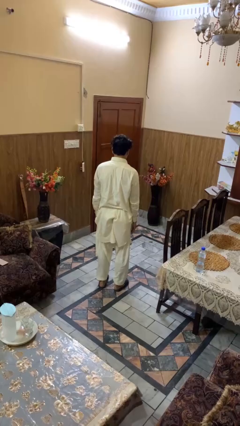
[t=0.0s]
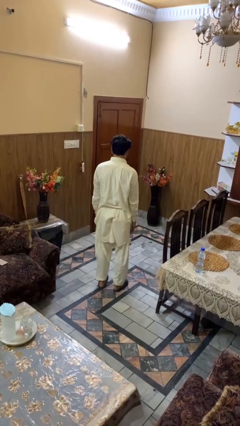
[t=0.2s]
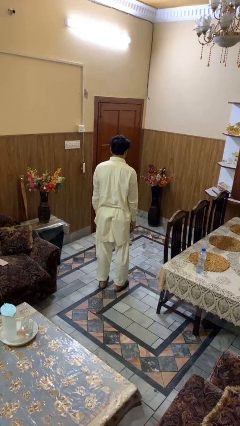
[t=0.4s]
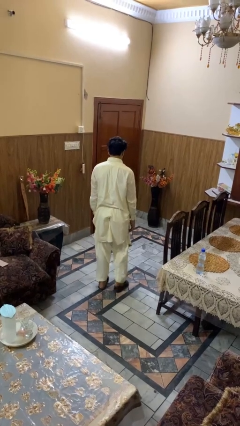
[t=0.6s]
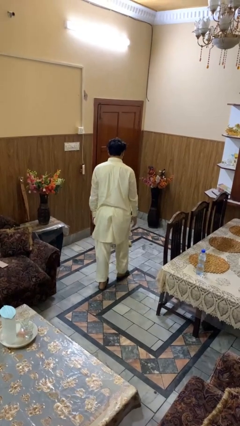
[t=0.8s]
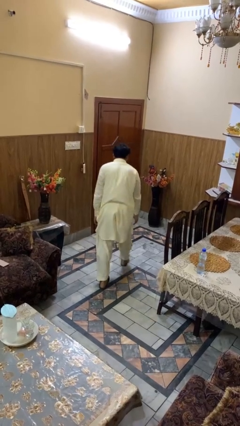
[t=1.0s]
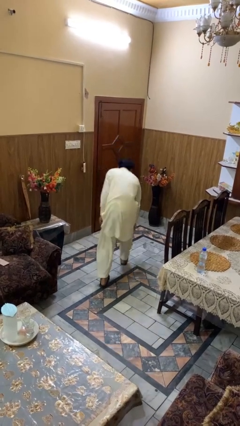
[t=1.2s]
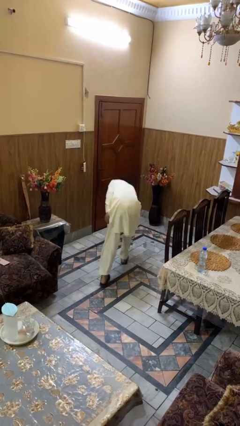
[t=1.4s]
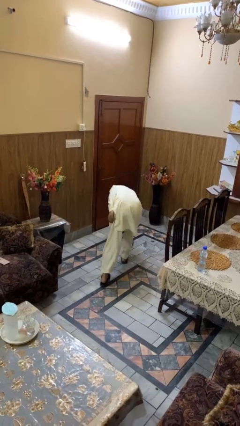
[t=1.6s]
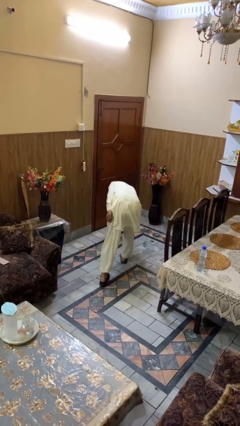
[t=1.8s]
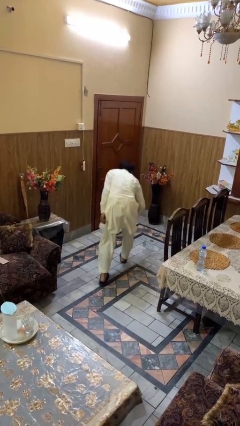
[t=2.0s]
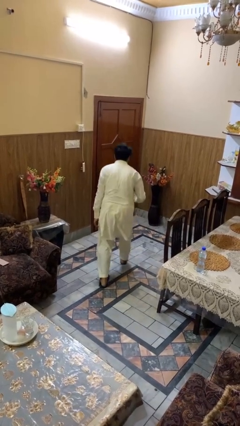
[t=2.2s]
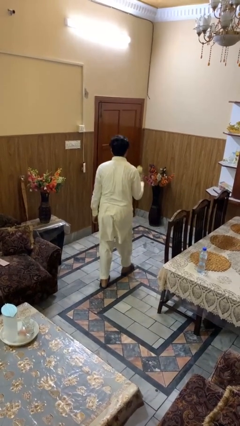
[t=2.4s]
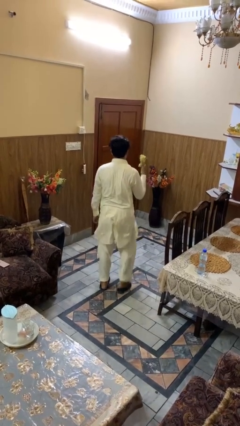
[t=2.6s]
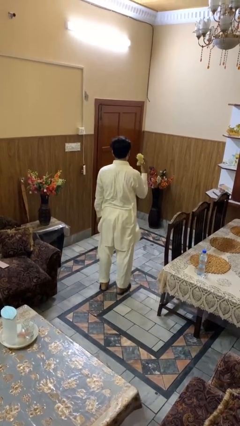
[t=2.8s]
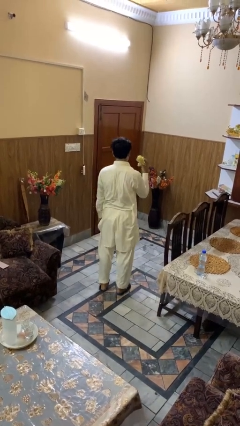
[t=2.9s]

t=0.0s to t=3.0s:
person picks up object from floor

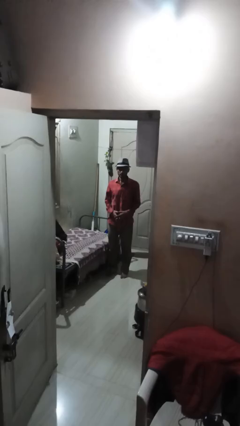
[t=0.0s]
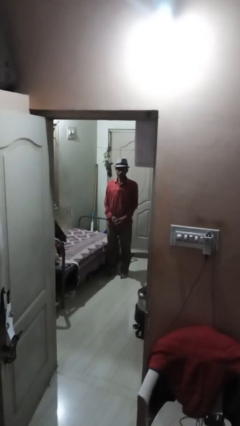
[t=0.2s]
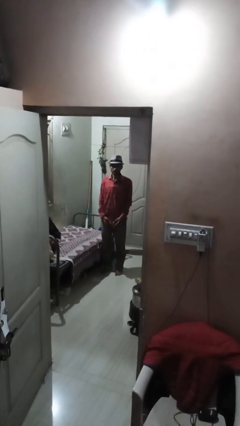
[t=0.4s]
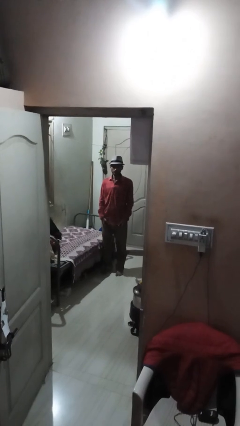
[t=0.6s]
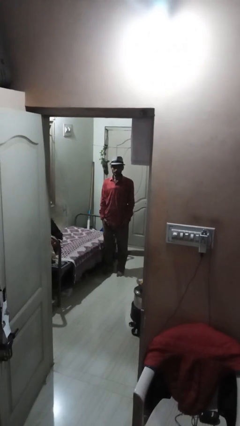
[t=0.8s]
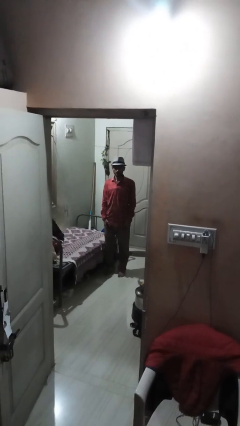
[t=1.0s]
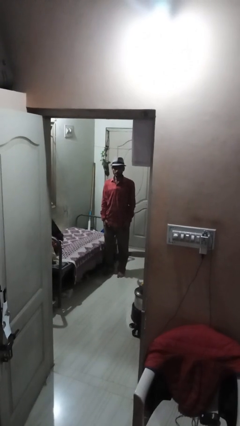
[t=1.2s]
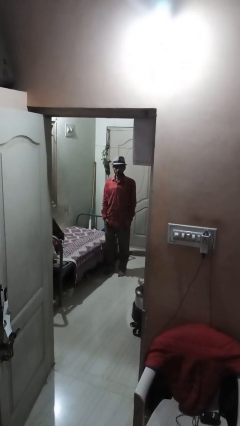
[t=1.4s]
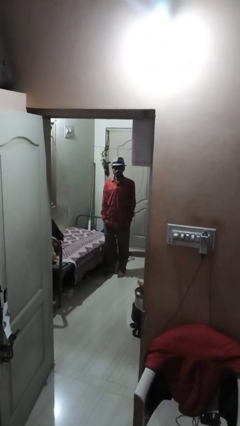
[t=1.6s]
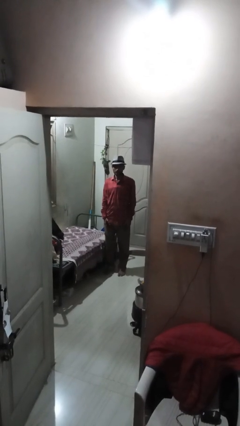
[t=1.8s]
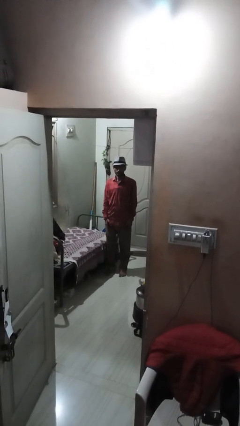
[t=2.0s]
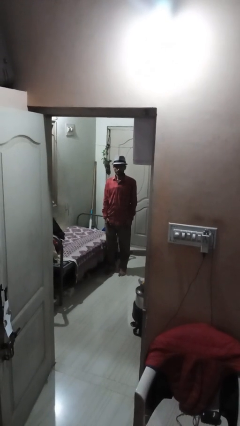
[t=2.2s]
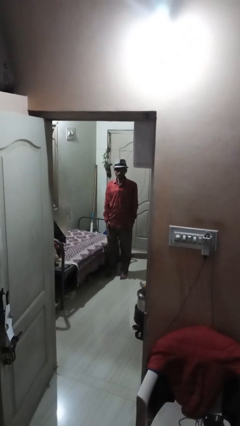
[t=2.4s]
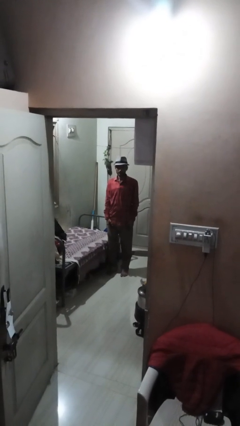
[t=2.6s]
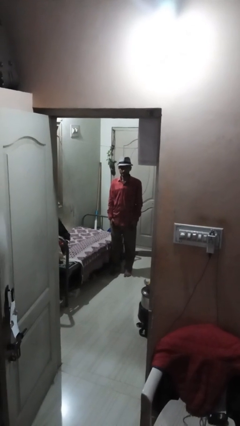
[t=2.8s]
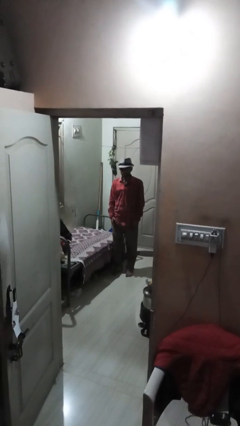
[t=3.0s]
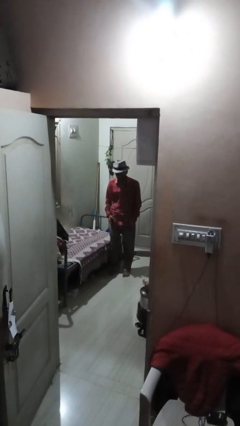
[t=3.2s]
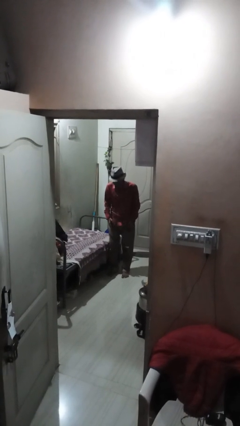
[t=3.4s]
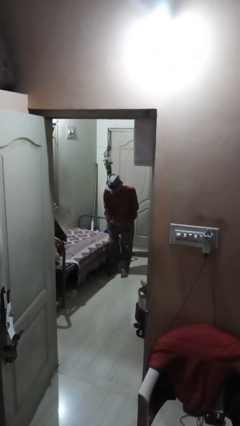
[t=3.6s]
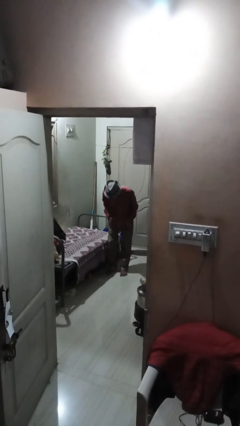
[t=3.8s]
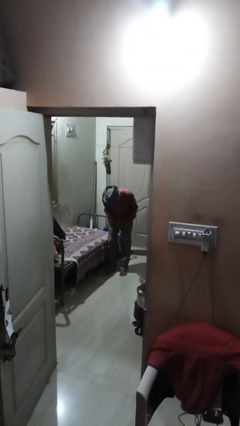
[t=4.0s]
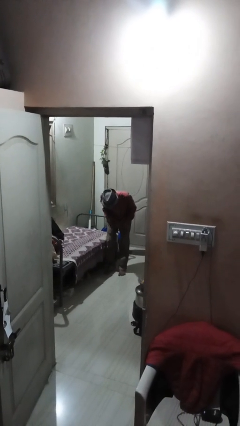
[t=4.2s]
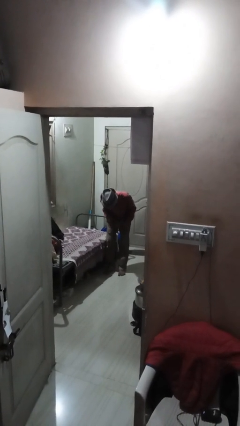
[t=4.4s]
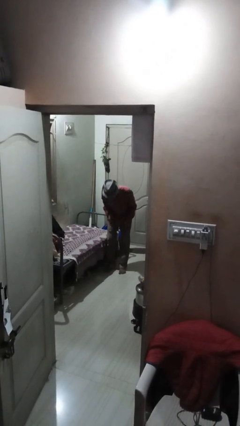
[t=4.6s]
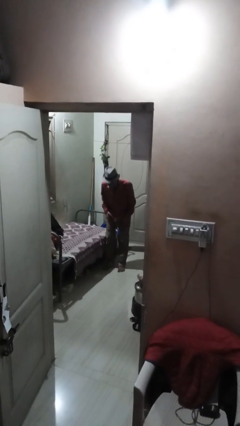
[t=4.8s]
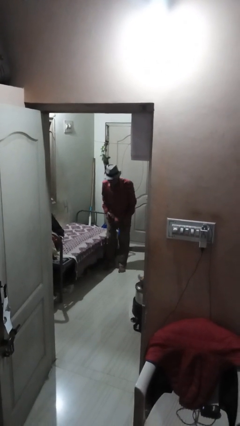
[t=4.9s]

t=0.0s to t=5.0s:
person bows

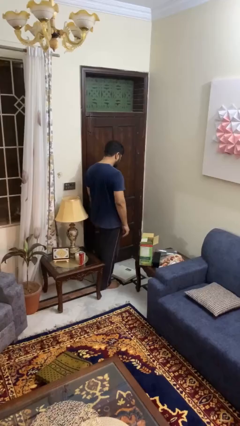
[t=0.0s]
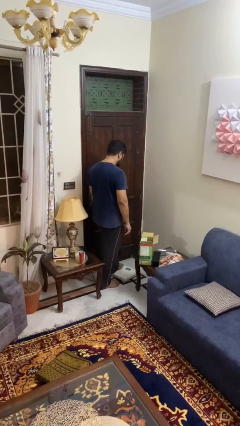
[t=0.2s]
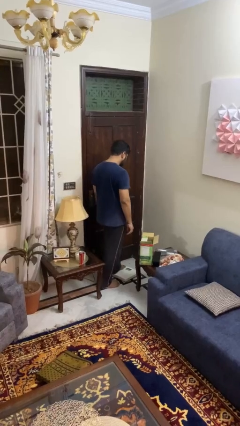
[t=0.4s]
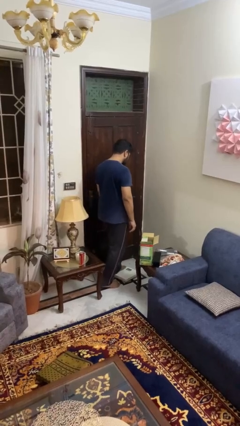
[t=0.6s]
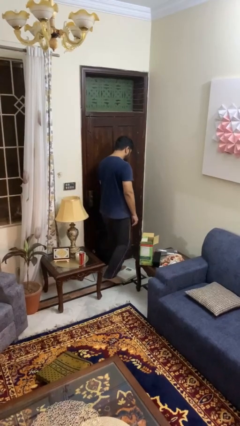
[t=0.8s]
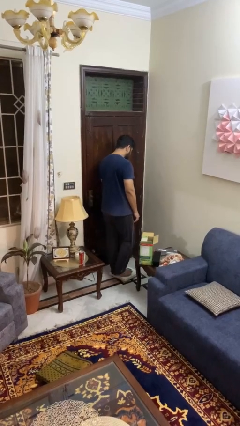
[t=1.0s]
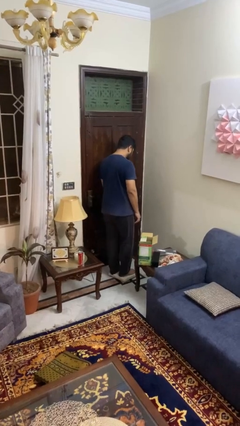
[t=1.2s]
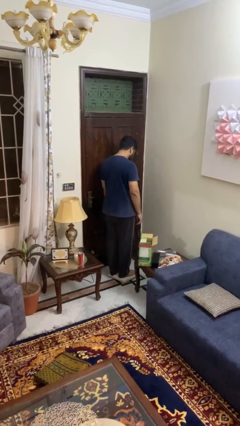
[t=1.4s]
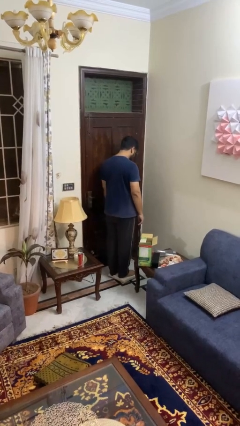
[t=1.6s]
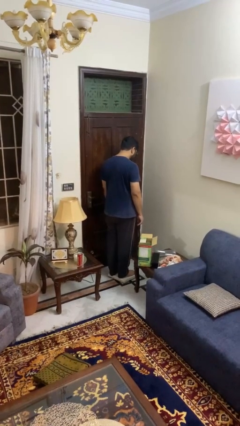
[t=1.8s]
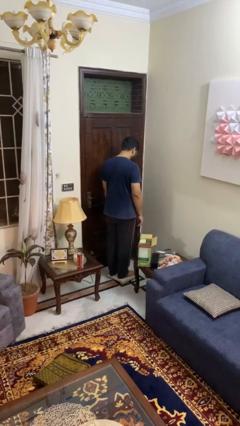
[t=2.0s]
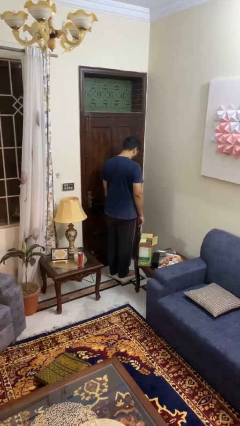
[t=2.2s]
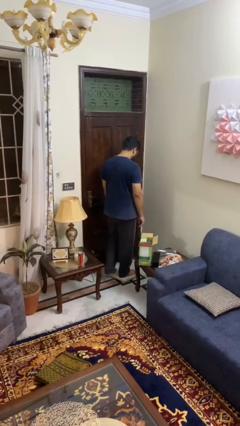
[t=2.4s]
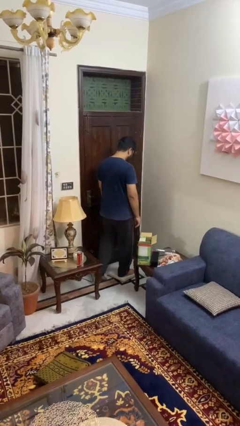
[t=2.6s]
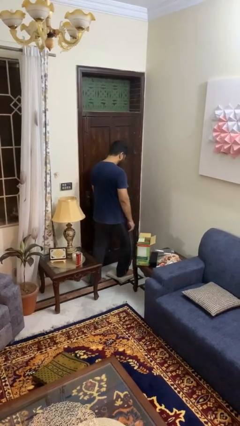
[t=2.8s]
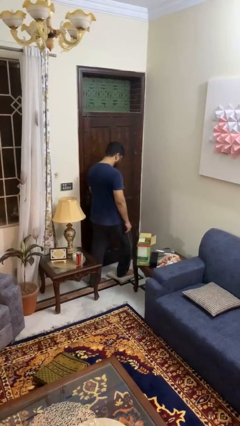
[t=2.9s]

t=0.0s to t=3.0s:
person uses bodyweight scale

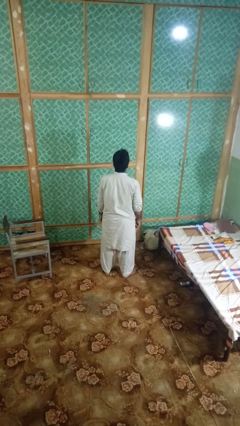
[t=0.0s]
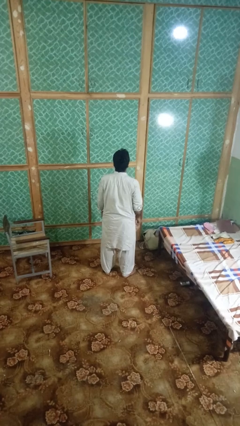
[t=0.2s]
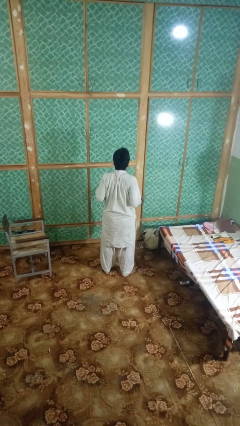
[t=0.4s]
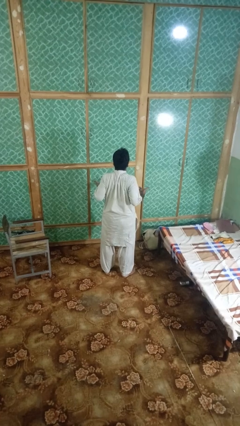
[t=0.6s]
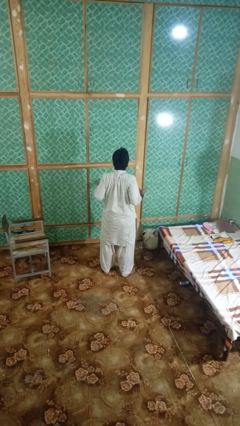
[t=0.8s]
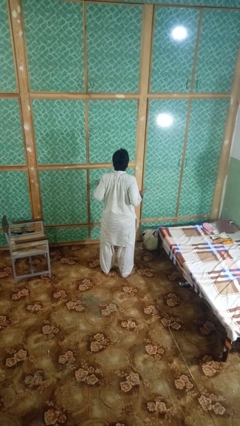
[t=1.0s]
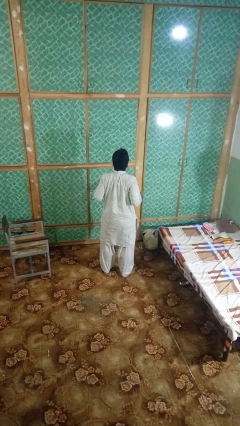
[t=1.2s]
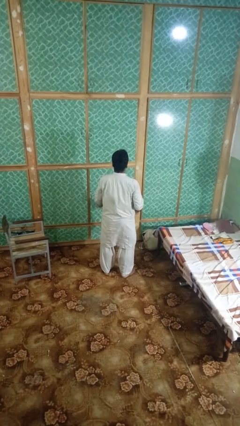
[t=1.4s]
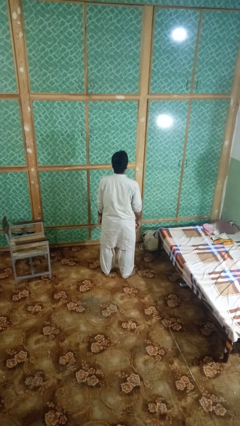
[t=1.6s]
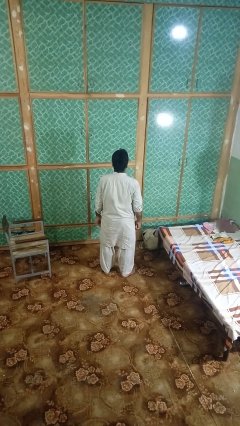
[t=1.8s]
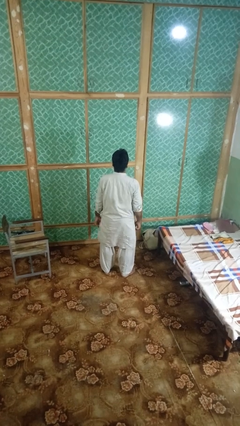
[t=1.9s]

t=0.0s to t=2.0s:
person shrugs

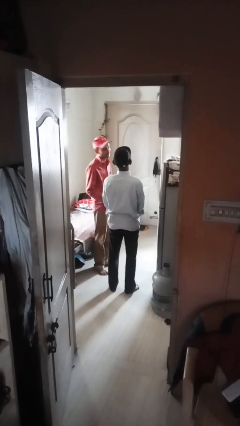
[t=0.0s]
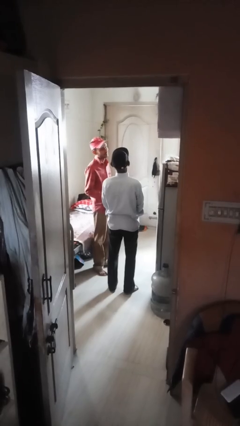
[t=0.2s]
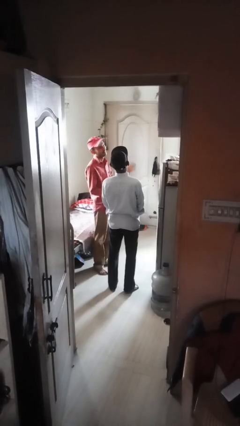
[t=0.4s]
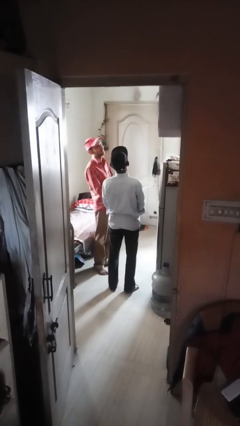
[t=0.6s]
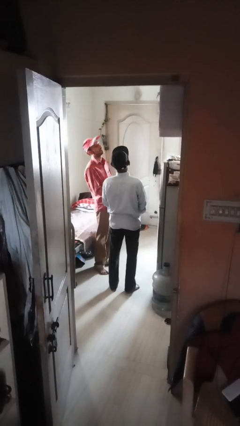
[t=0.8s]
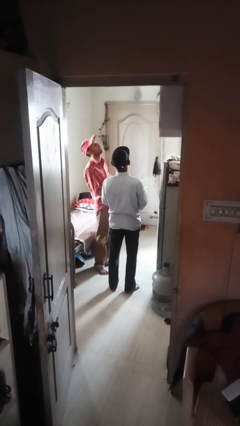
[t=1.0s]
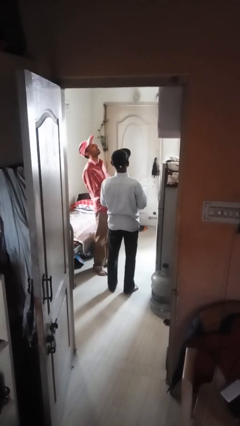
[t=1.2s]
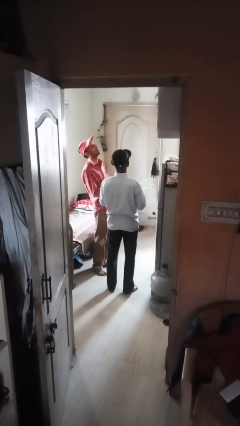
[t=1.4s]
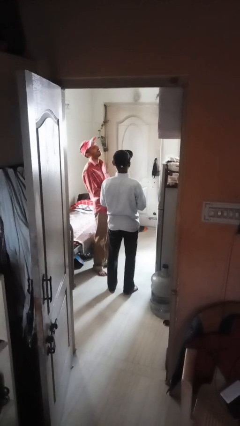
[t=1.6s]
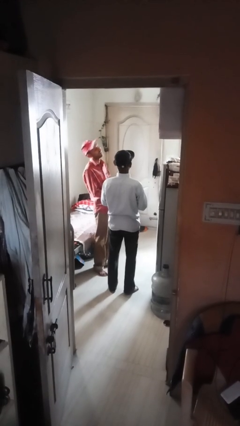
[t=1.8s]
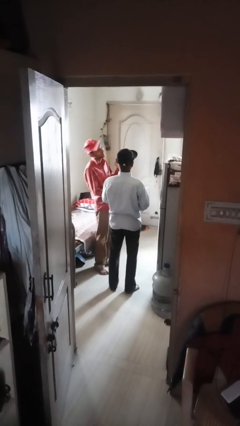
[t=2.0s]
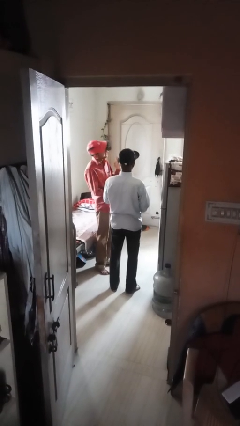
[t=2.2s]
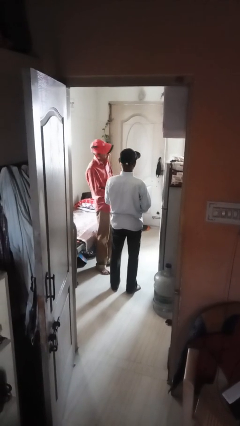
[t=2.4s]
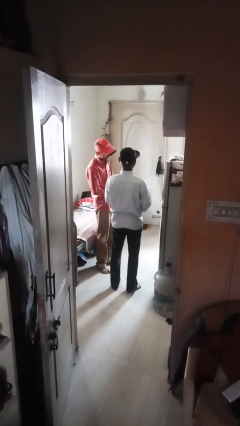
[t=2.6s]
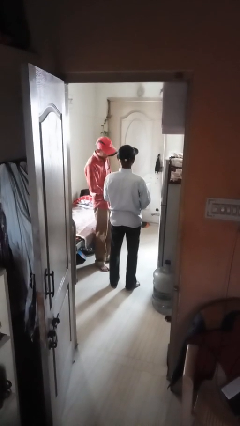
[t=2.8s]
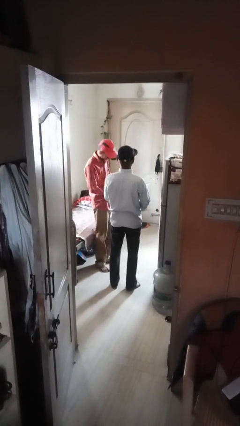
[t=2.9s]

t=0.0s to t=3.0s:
person laughs with person

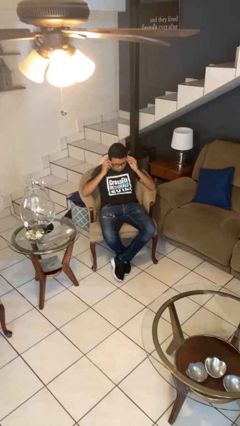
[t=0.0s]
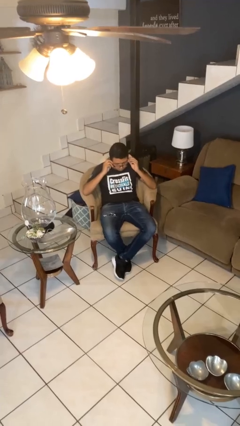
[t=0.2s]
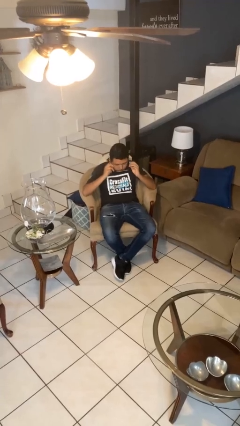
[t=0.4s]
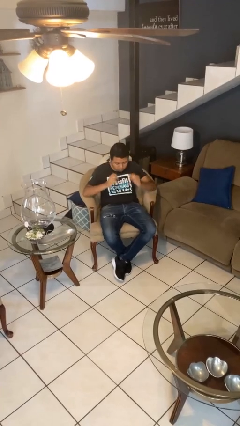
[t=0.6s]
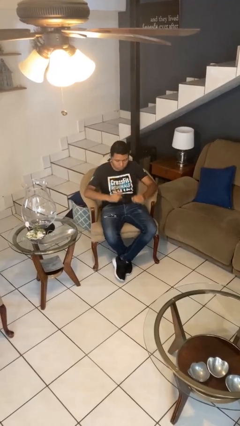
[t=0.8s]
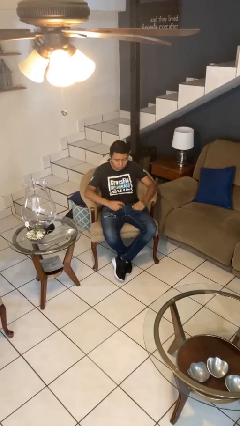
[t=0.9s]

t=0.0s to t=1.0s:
person takes off glasses
